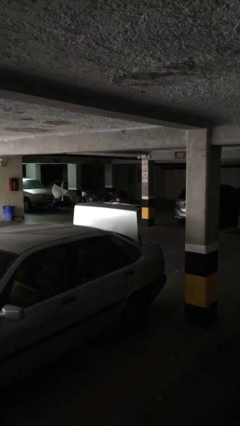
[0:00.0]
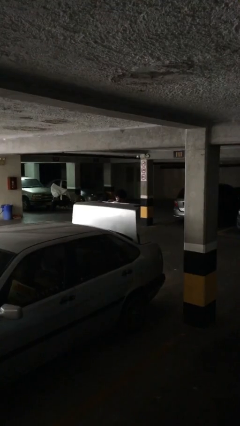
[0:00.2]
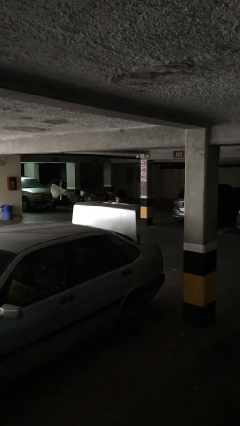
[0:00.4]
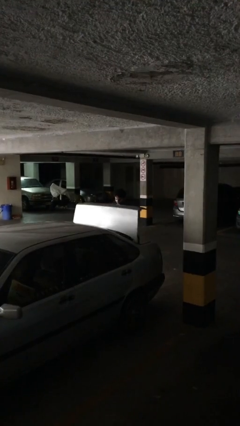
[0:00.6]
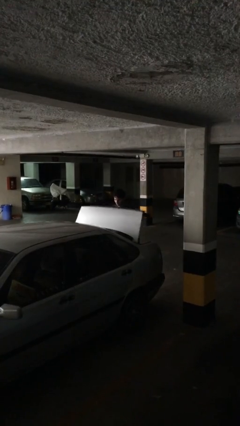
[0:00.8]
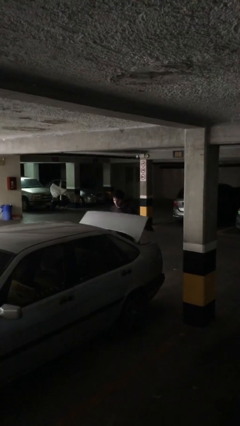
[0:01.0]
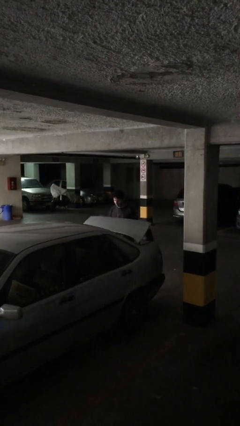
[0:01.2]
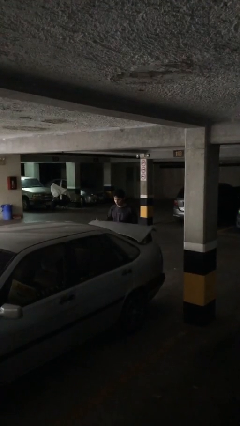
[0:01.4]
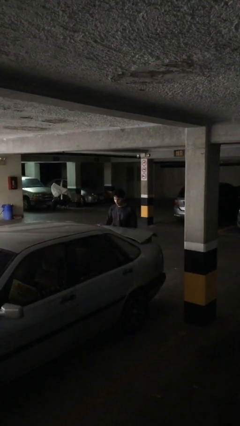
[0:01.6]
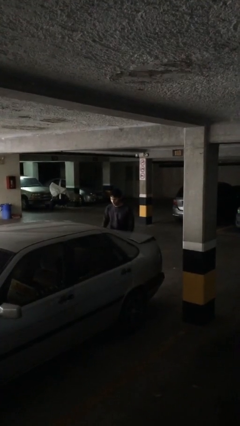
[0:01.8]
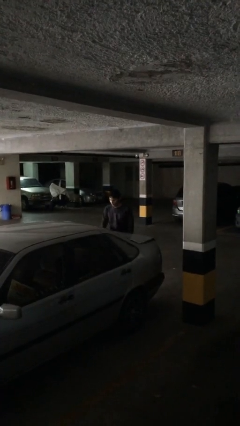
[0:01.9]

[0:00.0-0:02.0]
person closes car trunk

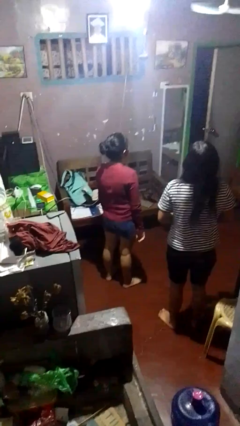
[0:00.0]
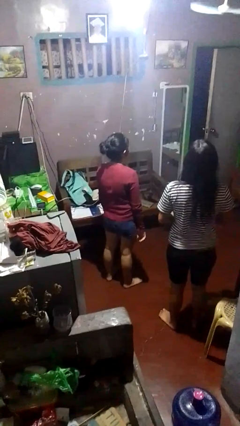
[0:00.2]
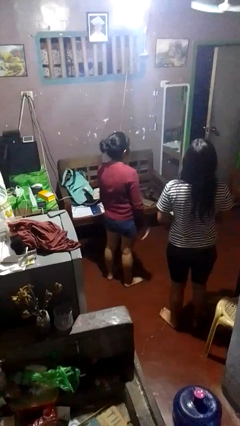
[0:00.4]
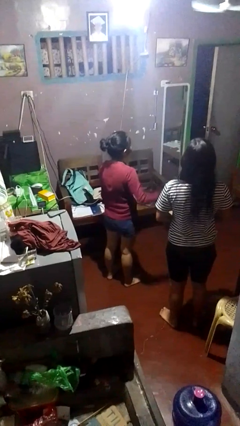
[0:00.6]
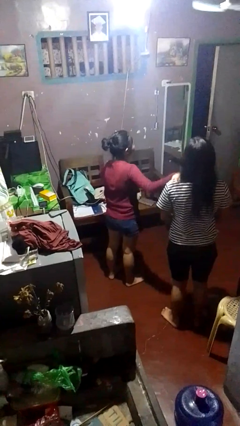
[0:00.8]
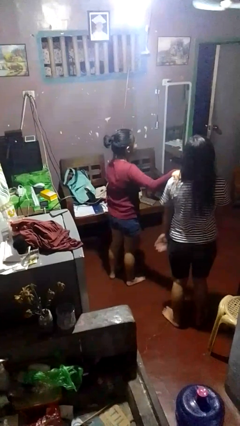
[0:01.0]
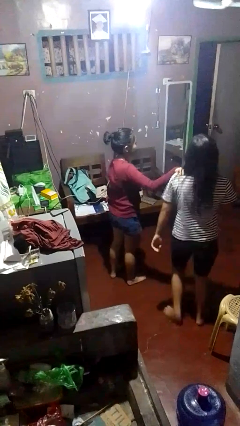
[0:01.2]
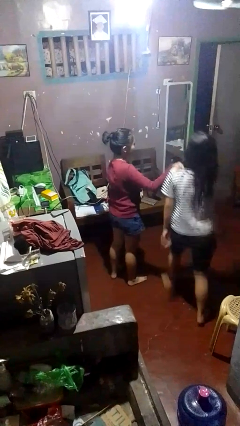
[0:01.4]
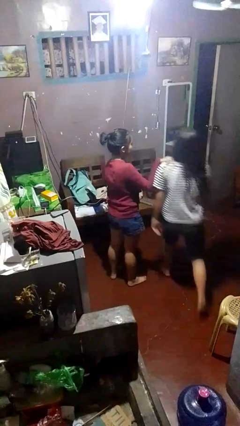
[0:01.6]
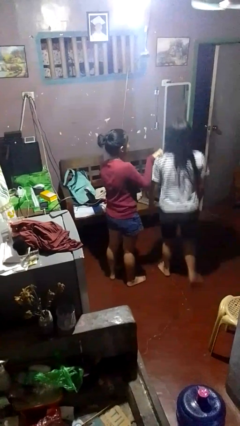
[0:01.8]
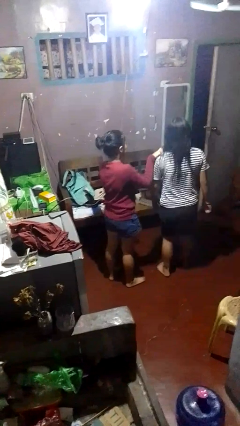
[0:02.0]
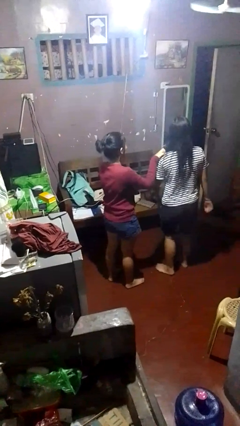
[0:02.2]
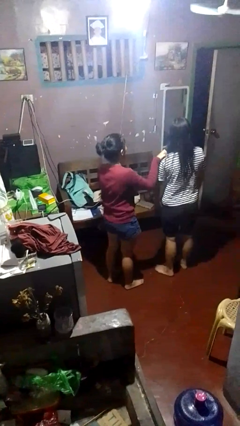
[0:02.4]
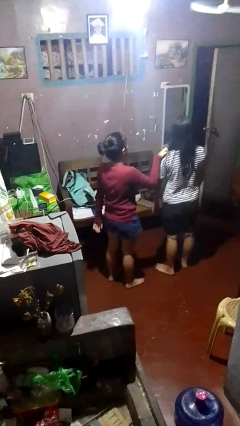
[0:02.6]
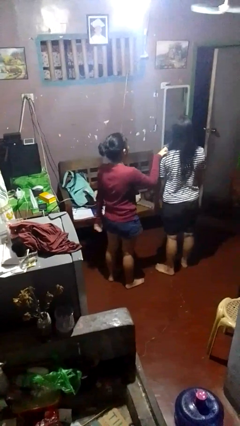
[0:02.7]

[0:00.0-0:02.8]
person grabs person by shoulder

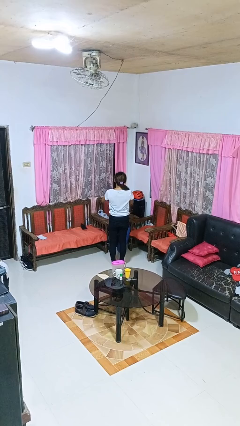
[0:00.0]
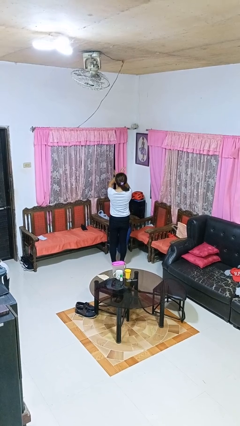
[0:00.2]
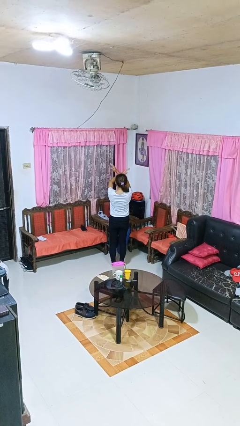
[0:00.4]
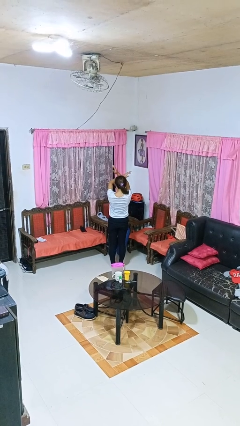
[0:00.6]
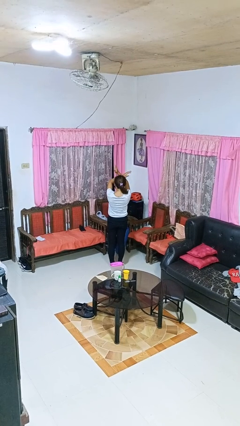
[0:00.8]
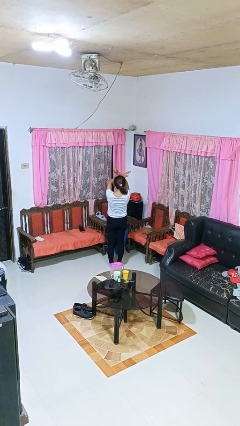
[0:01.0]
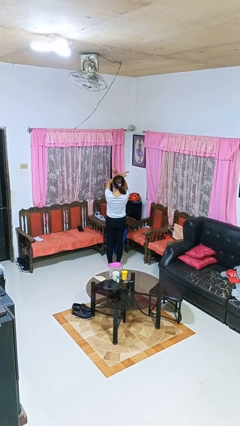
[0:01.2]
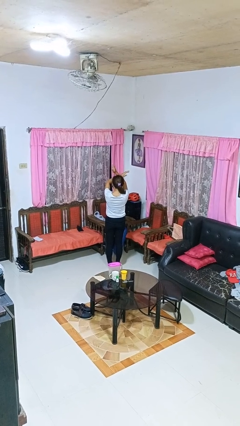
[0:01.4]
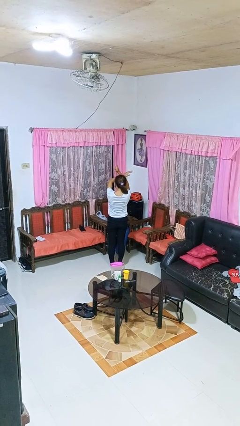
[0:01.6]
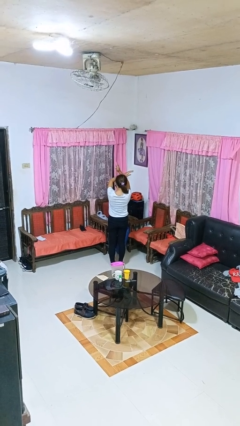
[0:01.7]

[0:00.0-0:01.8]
person gestures arms x

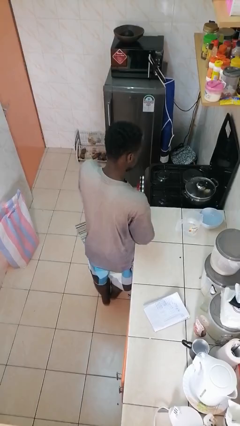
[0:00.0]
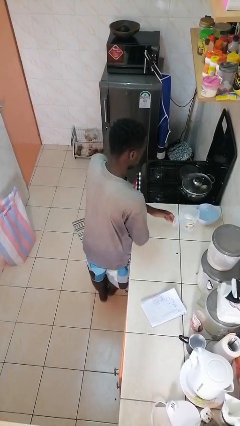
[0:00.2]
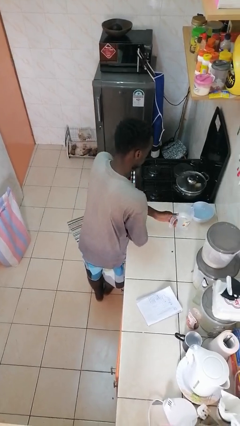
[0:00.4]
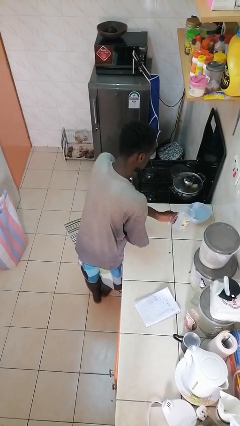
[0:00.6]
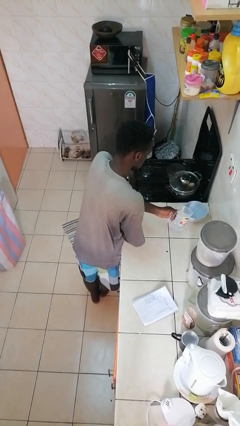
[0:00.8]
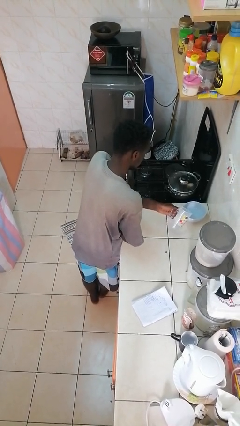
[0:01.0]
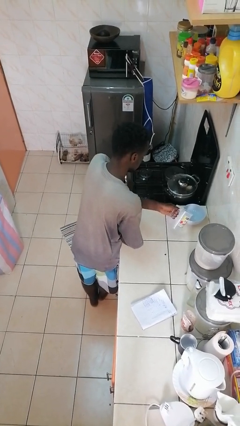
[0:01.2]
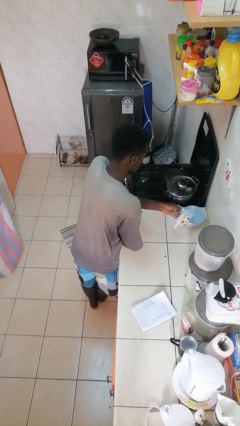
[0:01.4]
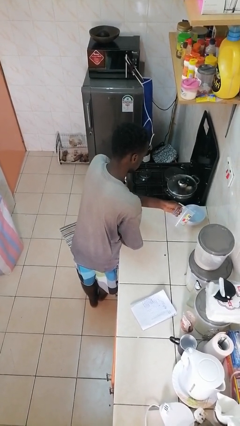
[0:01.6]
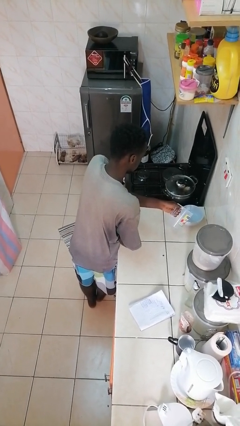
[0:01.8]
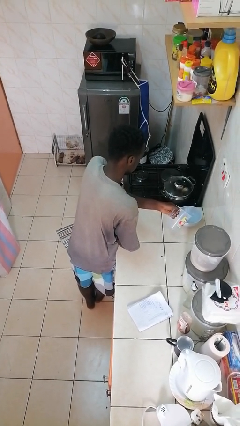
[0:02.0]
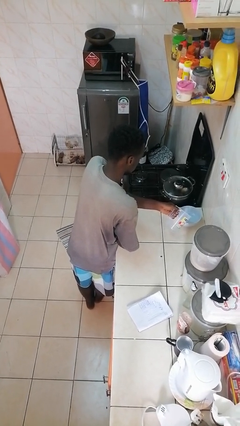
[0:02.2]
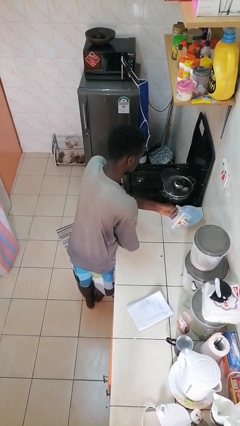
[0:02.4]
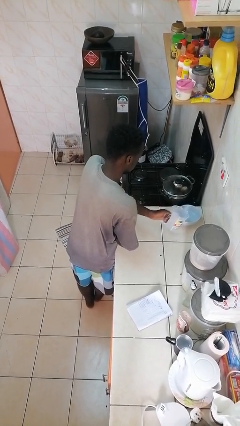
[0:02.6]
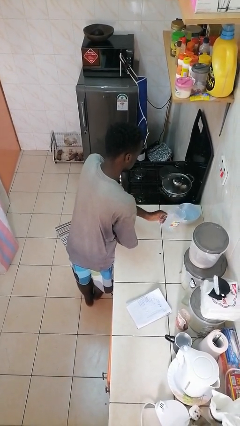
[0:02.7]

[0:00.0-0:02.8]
person pours into bowl

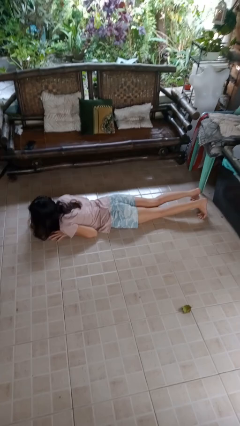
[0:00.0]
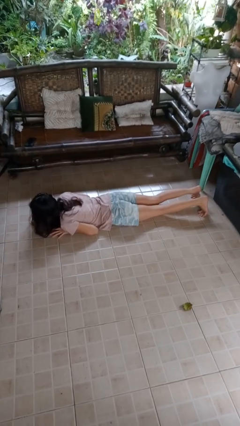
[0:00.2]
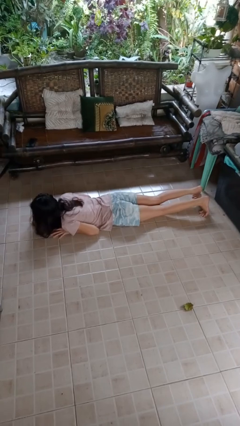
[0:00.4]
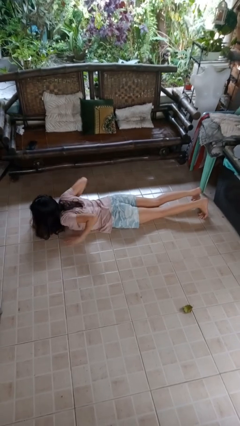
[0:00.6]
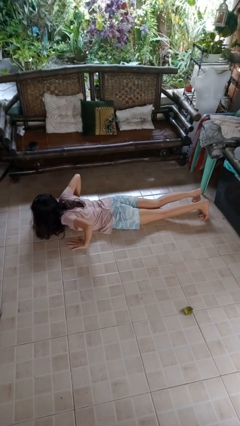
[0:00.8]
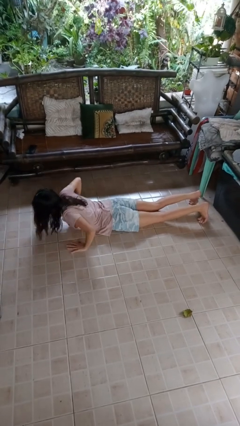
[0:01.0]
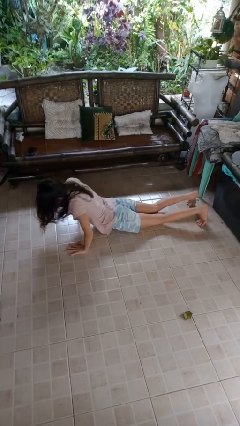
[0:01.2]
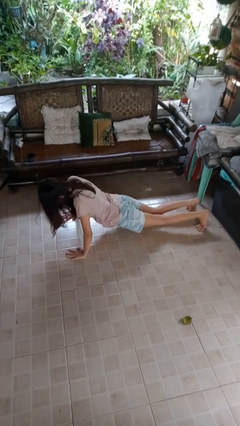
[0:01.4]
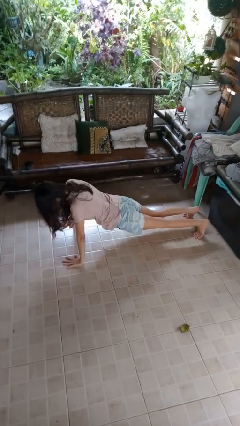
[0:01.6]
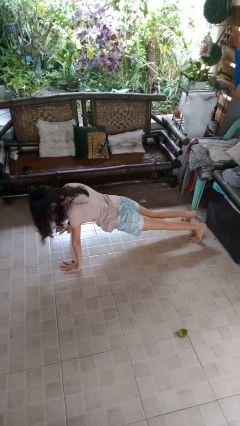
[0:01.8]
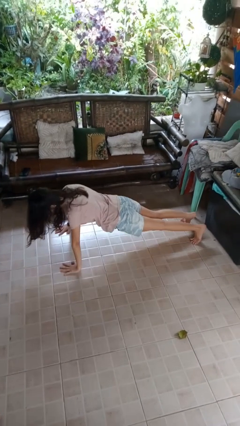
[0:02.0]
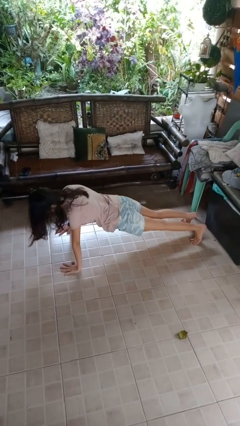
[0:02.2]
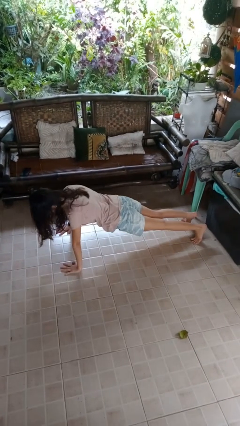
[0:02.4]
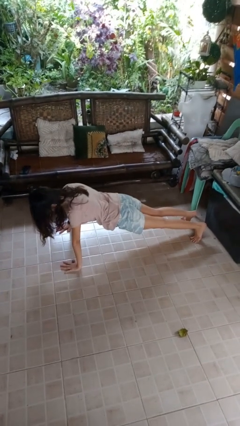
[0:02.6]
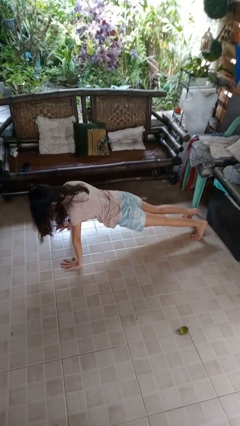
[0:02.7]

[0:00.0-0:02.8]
person exercises with pushup

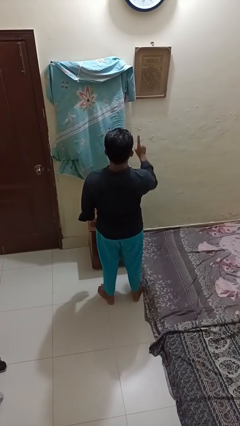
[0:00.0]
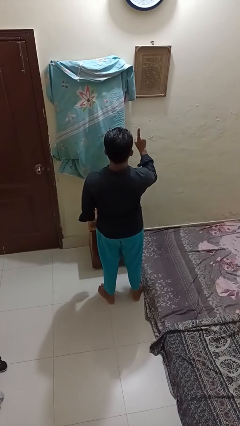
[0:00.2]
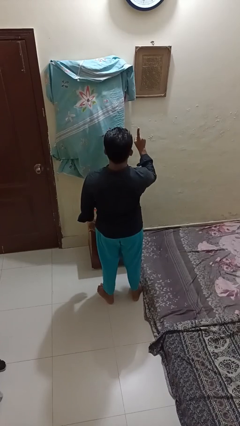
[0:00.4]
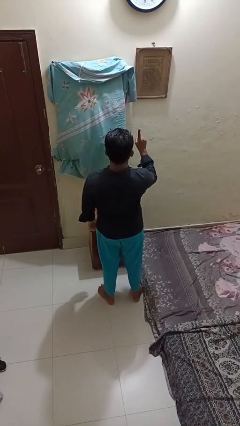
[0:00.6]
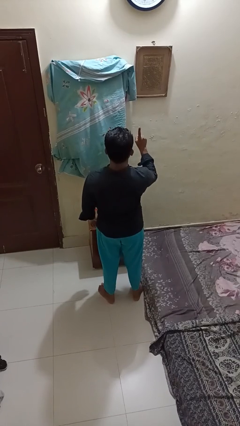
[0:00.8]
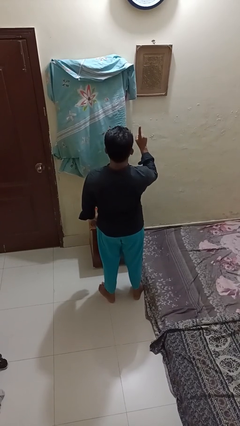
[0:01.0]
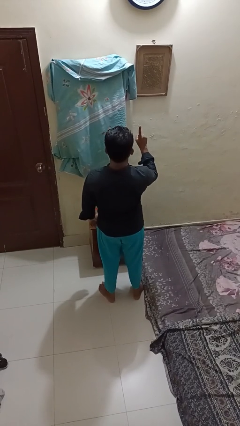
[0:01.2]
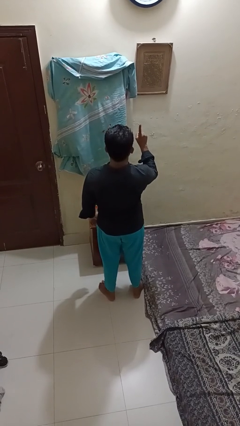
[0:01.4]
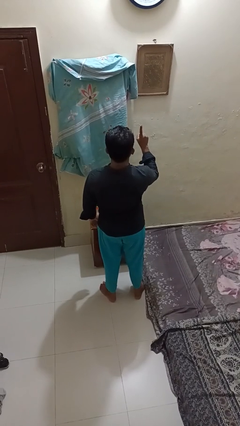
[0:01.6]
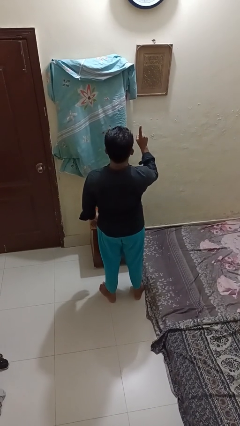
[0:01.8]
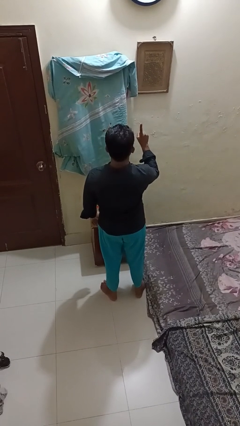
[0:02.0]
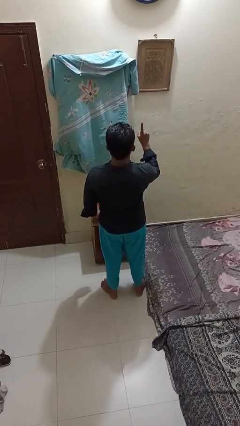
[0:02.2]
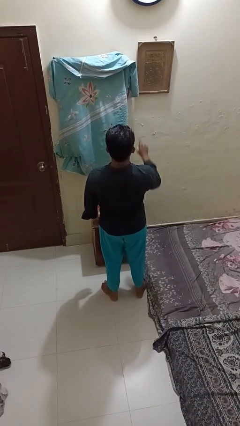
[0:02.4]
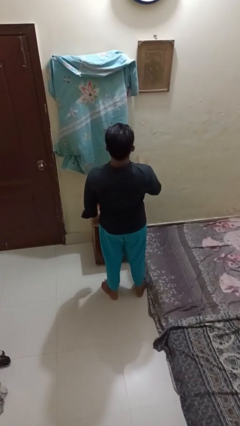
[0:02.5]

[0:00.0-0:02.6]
person gestures number one

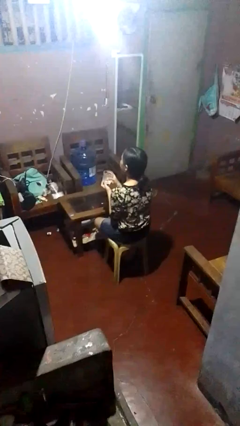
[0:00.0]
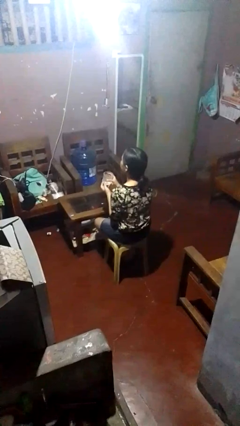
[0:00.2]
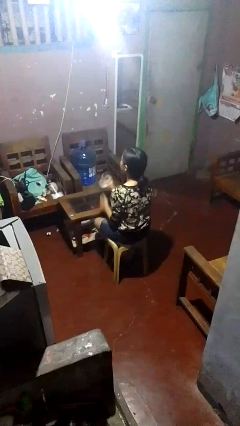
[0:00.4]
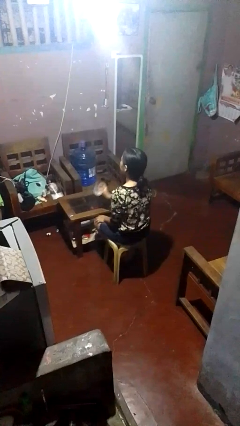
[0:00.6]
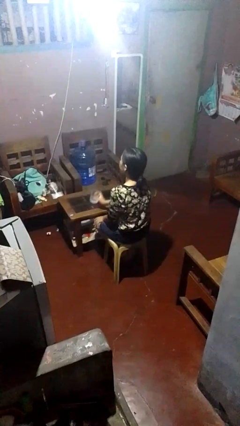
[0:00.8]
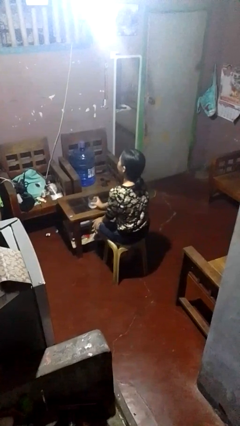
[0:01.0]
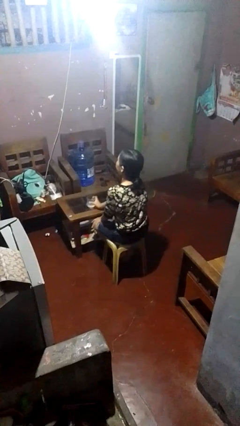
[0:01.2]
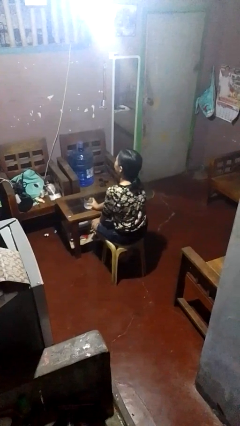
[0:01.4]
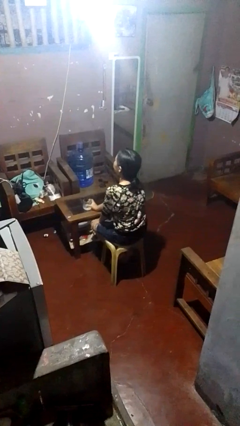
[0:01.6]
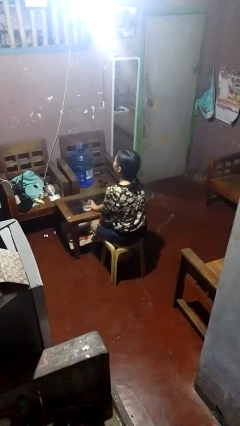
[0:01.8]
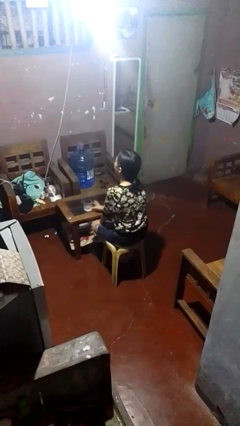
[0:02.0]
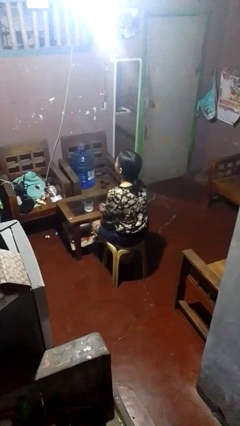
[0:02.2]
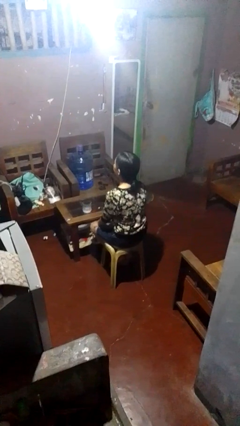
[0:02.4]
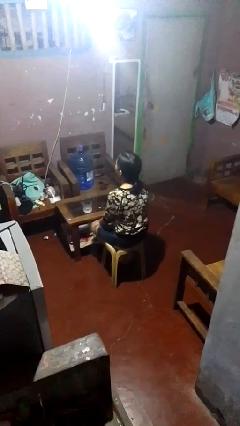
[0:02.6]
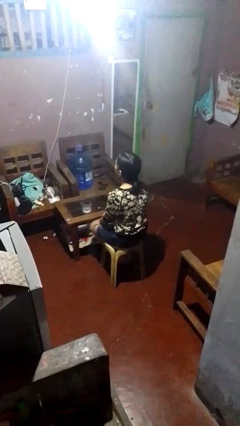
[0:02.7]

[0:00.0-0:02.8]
person puts down object on table
